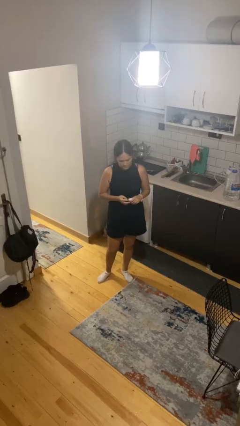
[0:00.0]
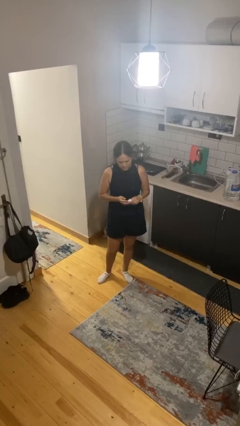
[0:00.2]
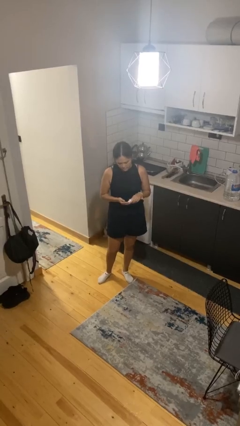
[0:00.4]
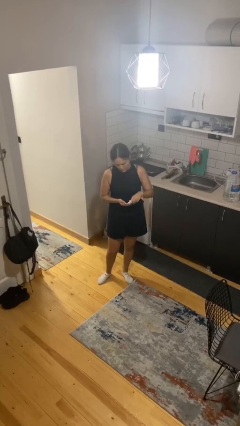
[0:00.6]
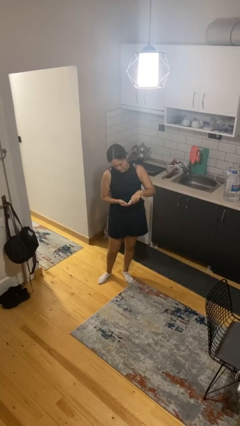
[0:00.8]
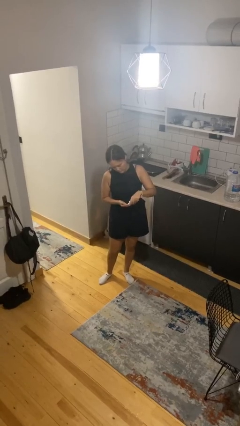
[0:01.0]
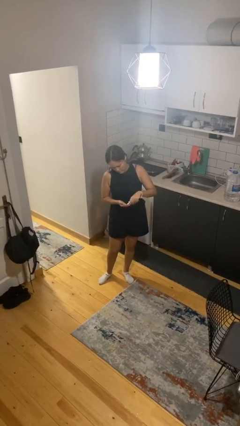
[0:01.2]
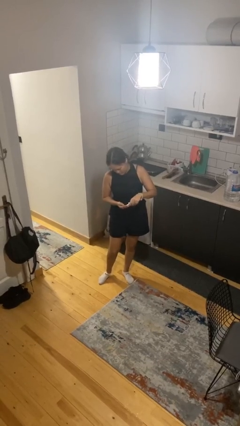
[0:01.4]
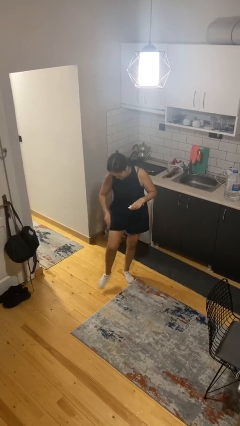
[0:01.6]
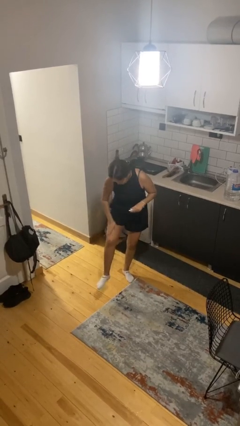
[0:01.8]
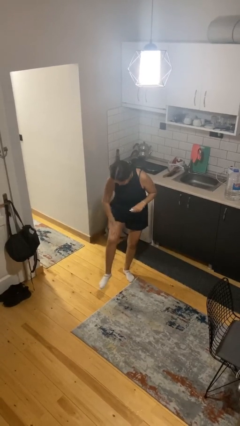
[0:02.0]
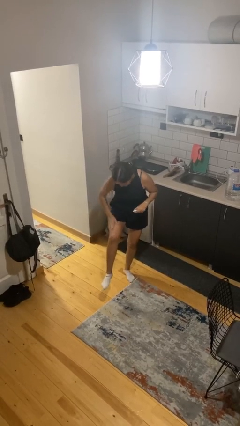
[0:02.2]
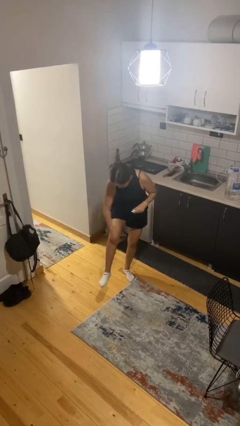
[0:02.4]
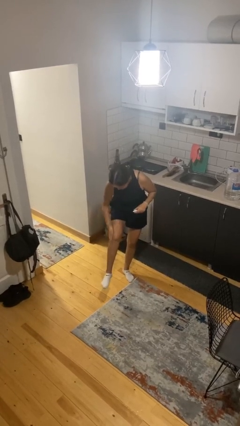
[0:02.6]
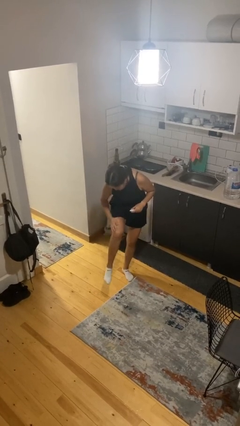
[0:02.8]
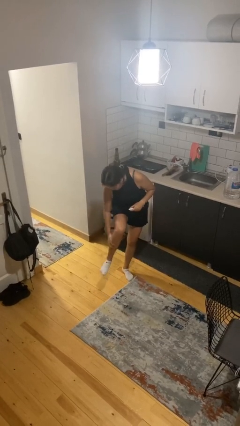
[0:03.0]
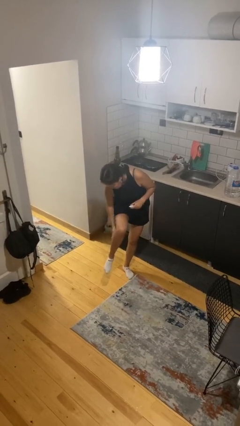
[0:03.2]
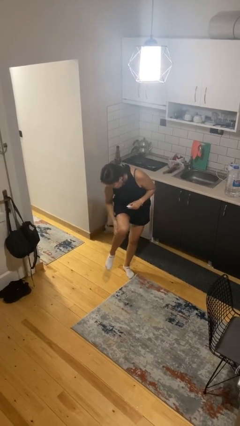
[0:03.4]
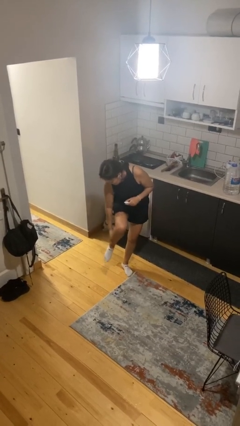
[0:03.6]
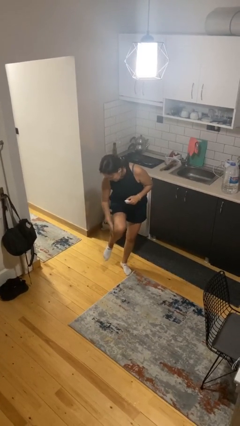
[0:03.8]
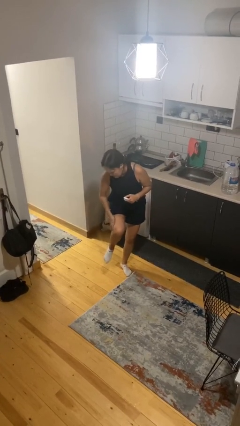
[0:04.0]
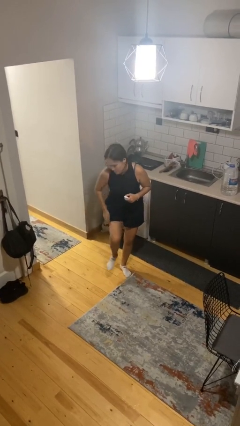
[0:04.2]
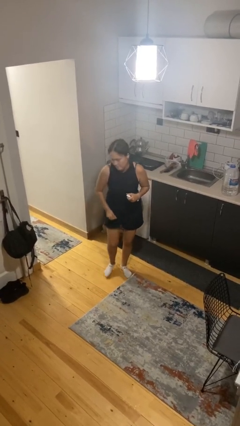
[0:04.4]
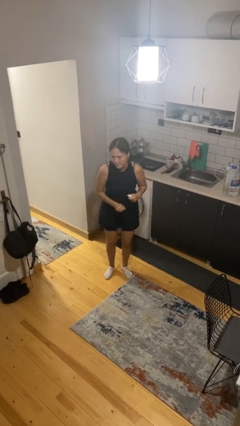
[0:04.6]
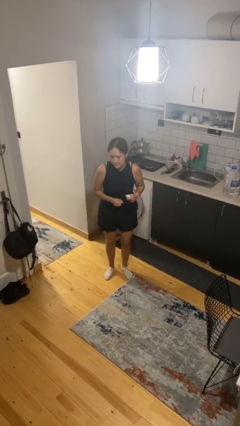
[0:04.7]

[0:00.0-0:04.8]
person applies sunscreen

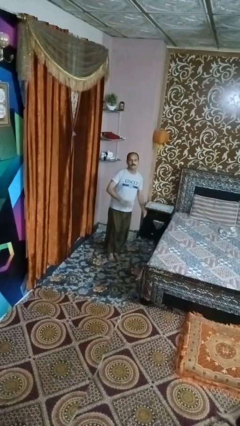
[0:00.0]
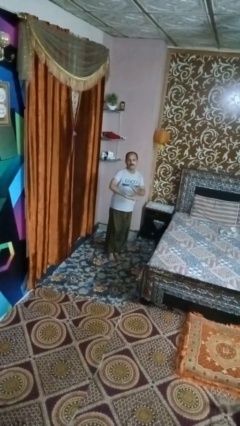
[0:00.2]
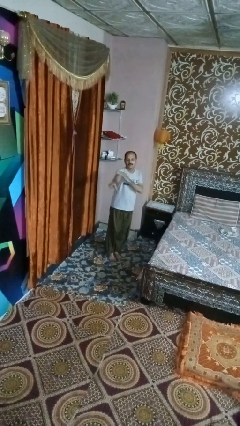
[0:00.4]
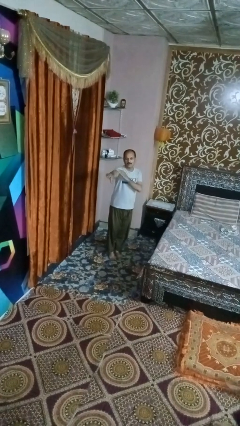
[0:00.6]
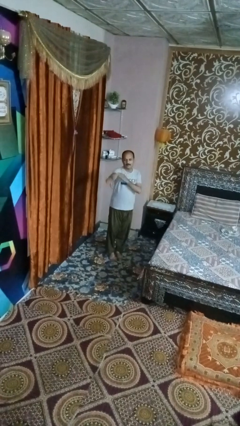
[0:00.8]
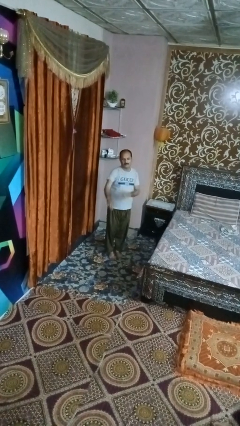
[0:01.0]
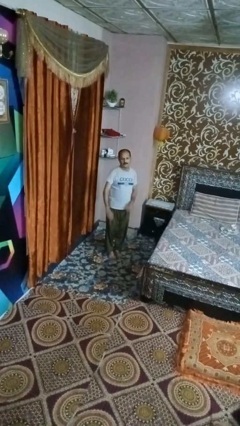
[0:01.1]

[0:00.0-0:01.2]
person karate chop

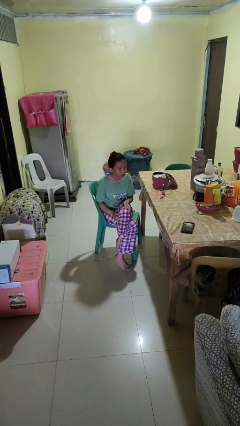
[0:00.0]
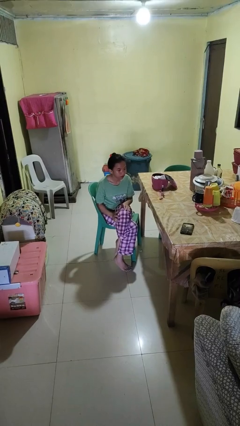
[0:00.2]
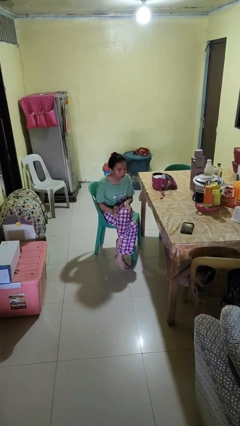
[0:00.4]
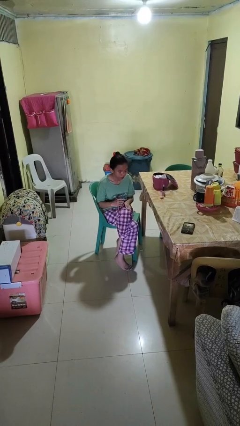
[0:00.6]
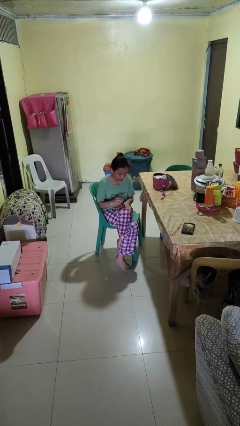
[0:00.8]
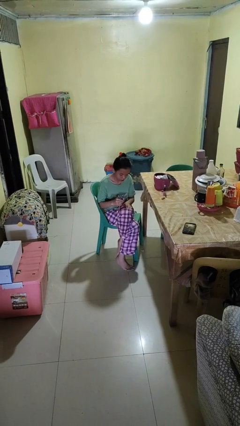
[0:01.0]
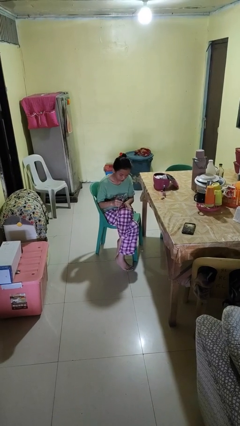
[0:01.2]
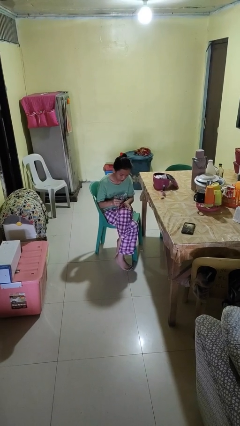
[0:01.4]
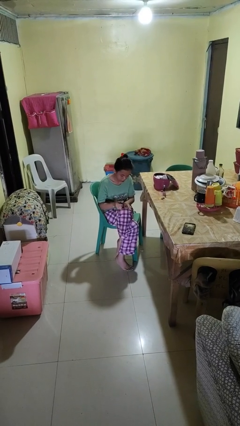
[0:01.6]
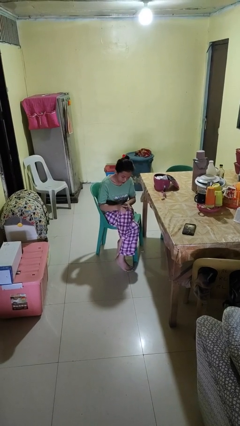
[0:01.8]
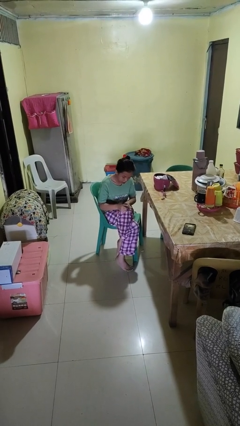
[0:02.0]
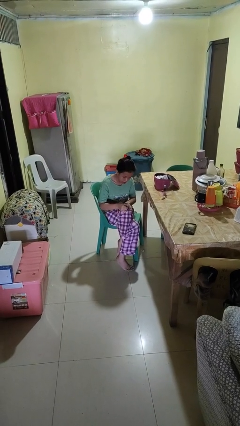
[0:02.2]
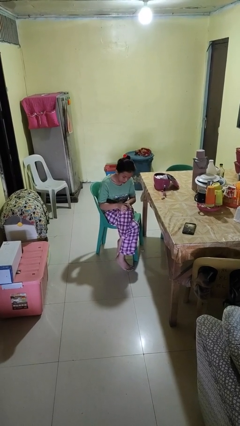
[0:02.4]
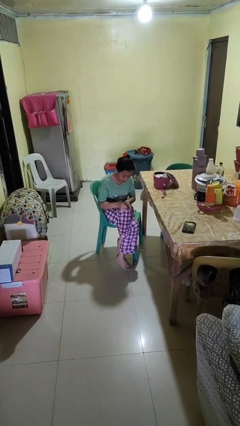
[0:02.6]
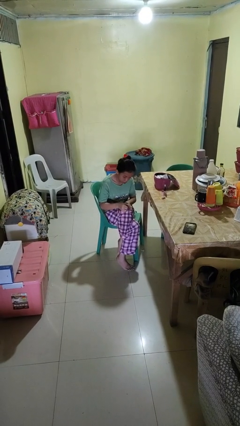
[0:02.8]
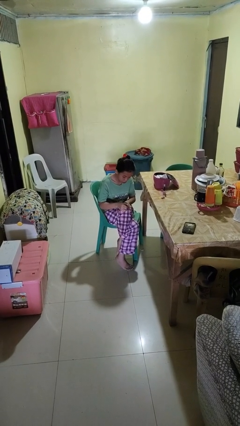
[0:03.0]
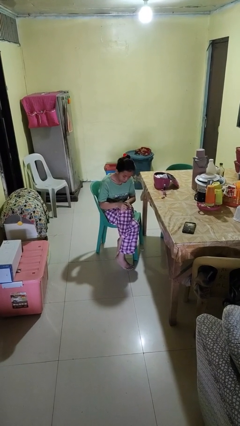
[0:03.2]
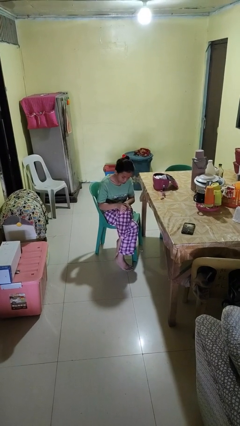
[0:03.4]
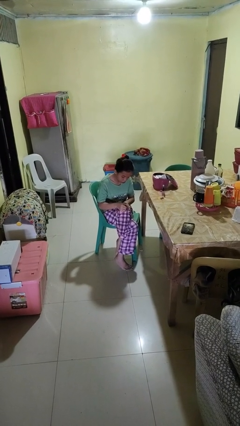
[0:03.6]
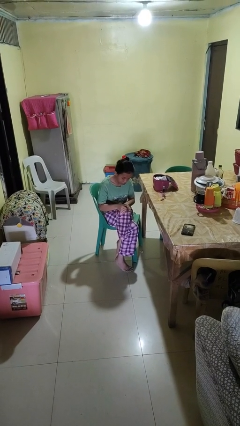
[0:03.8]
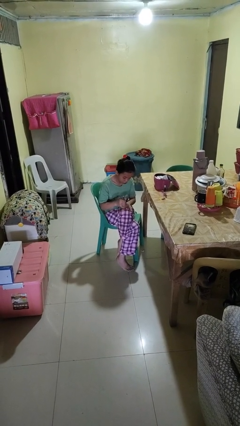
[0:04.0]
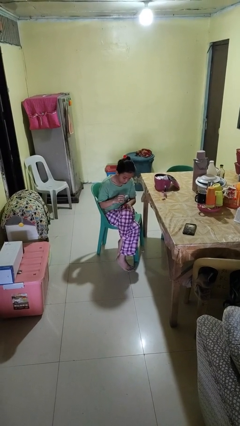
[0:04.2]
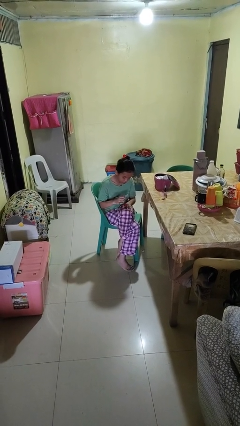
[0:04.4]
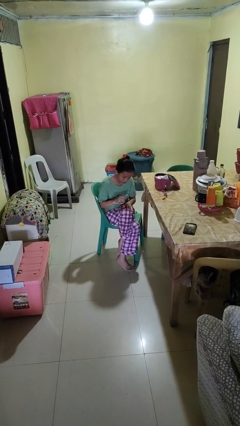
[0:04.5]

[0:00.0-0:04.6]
person paints fingernails

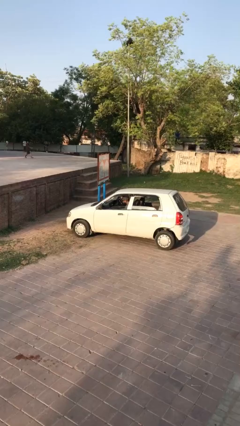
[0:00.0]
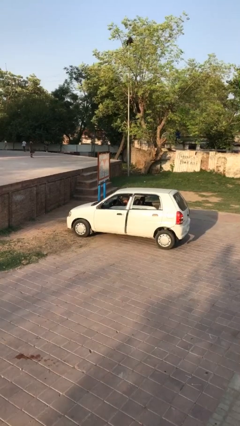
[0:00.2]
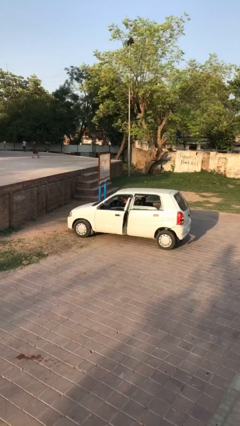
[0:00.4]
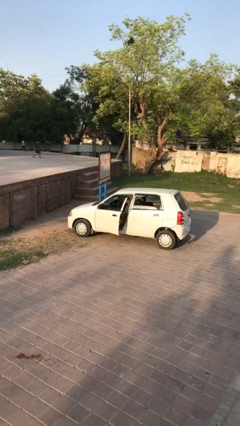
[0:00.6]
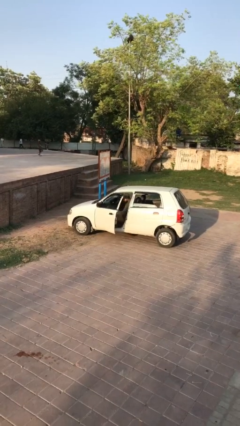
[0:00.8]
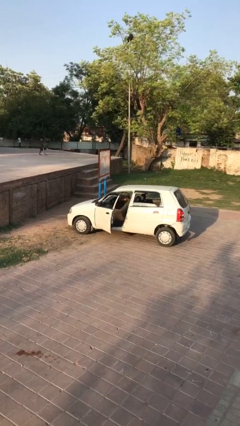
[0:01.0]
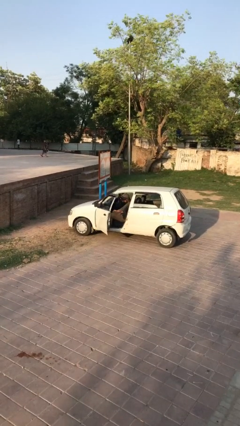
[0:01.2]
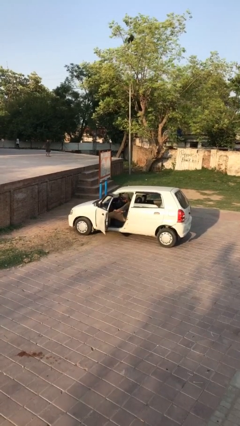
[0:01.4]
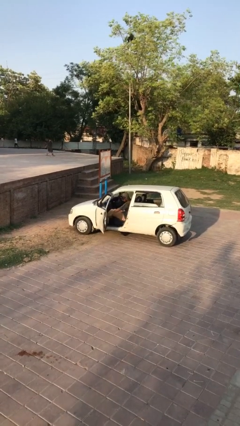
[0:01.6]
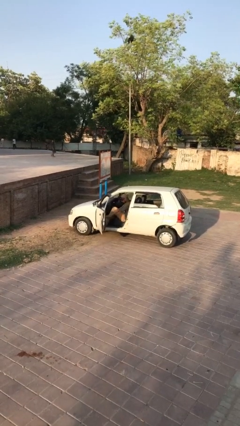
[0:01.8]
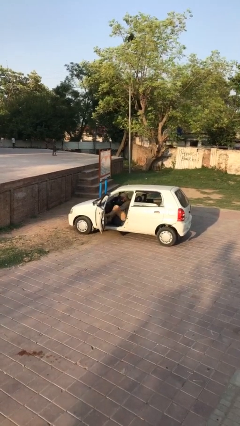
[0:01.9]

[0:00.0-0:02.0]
person opens car door

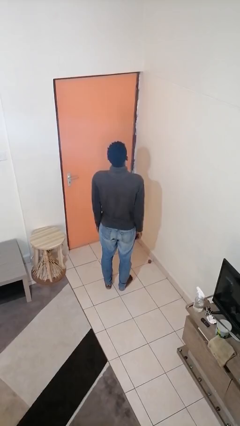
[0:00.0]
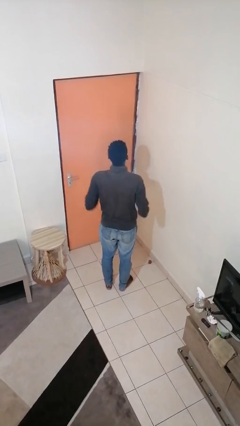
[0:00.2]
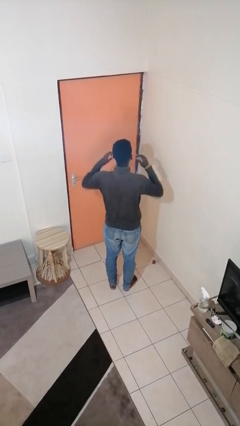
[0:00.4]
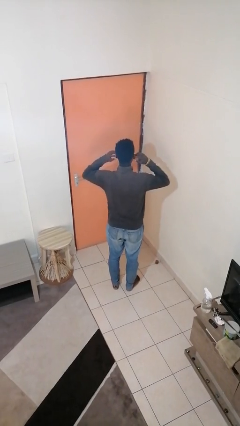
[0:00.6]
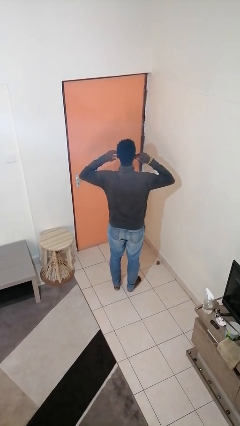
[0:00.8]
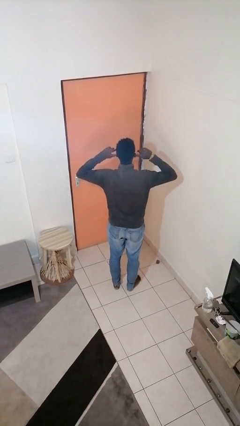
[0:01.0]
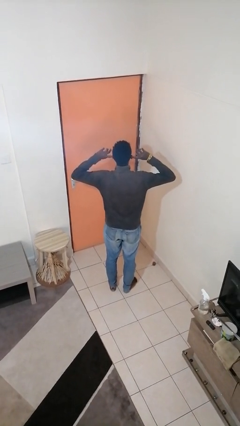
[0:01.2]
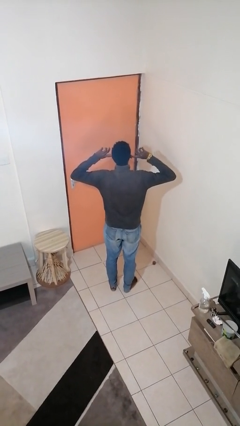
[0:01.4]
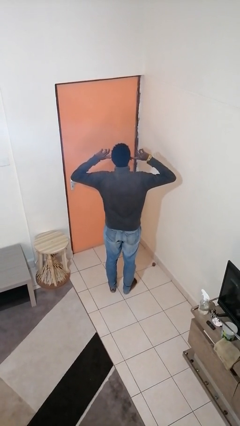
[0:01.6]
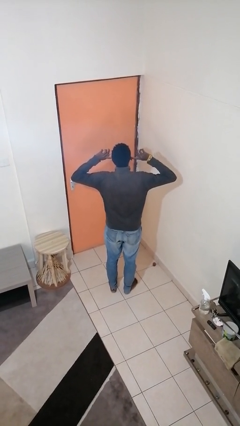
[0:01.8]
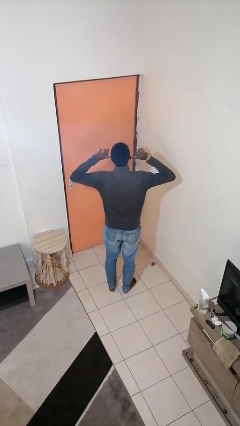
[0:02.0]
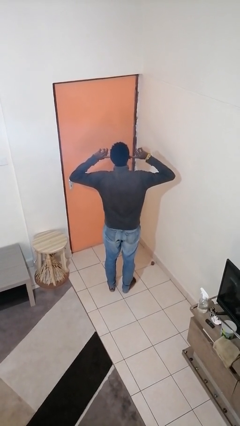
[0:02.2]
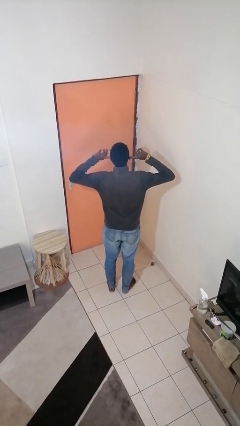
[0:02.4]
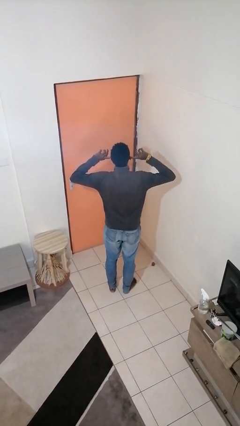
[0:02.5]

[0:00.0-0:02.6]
person puts fingers in ear

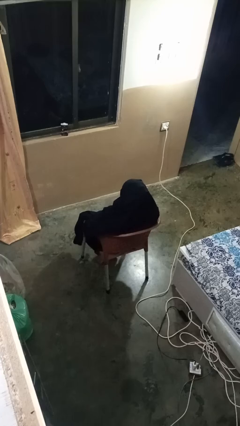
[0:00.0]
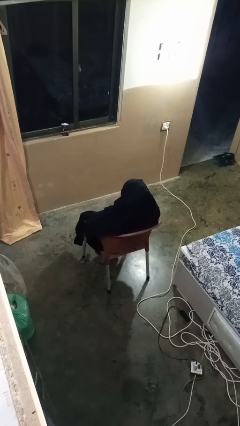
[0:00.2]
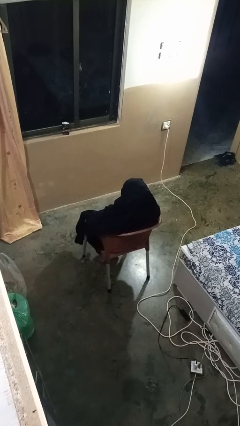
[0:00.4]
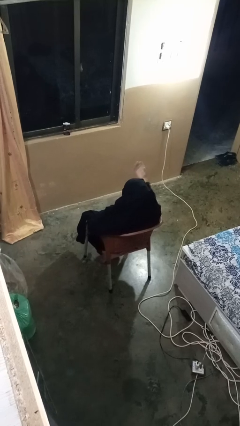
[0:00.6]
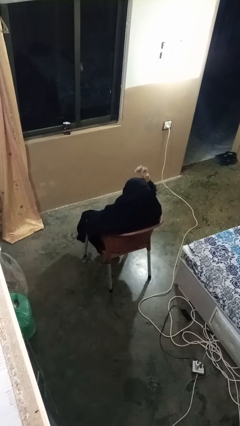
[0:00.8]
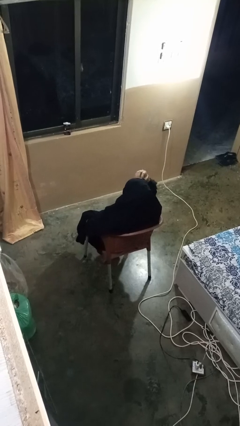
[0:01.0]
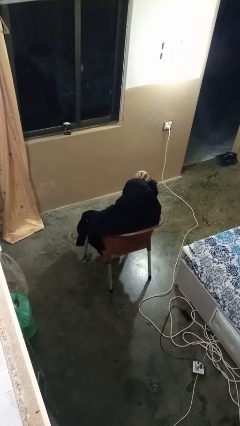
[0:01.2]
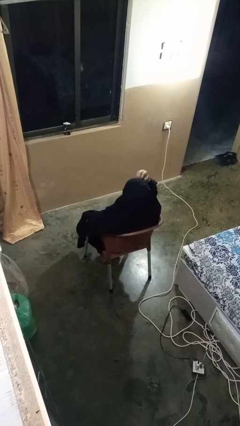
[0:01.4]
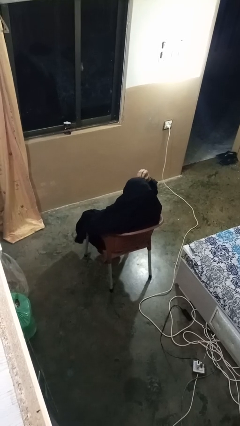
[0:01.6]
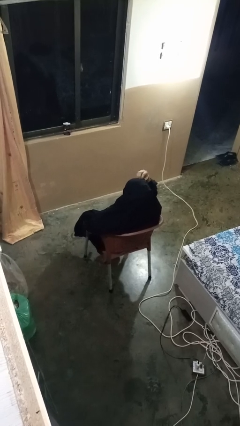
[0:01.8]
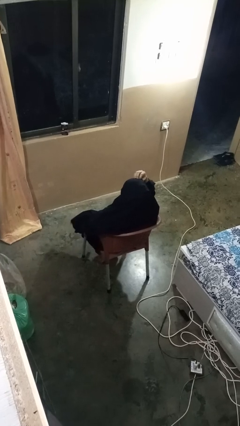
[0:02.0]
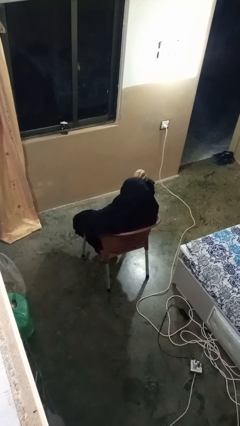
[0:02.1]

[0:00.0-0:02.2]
person scratches face
